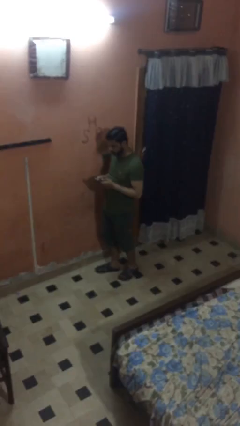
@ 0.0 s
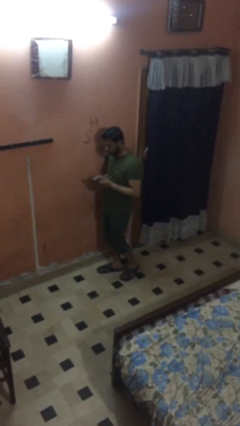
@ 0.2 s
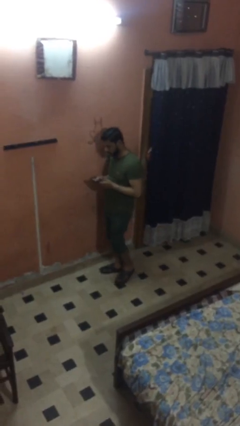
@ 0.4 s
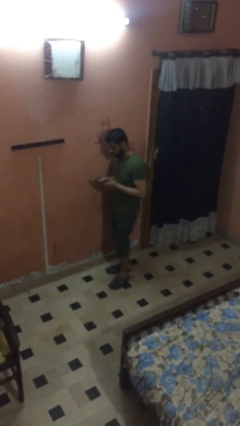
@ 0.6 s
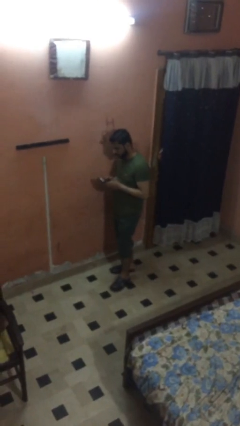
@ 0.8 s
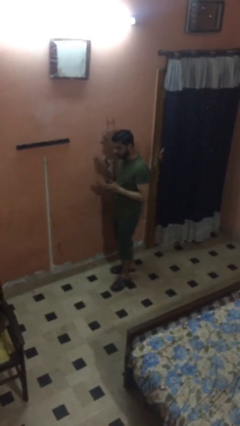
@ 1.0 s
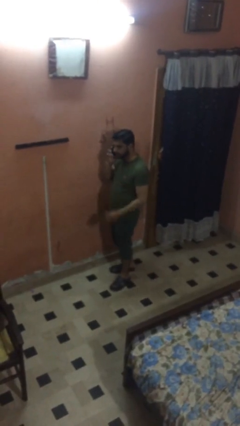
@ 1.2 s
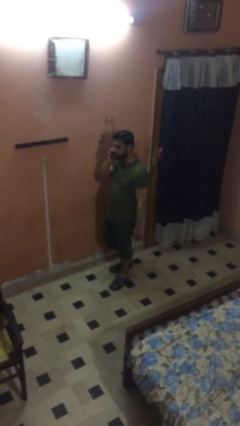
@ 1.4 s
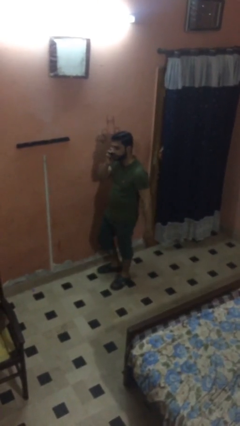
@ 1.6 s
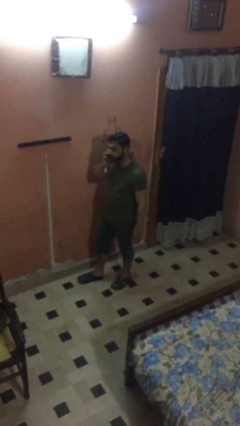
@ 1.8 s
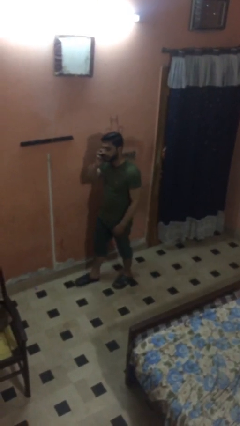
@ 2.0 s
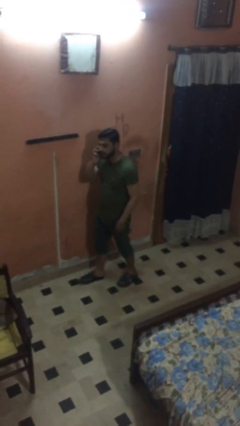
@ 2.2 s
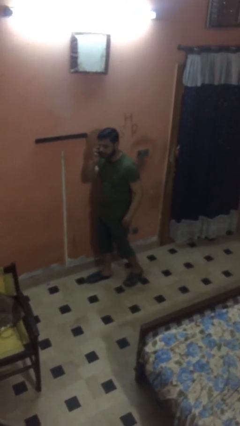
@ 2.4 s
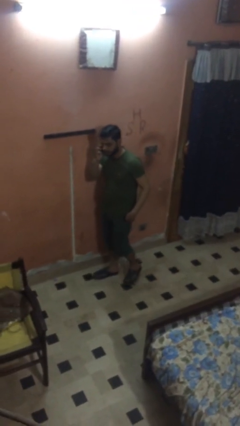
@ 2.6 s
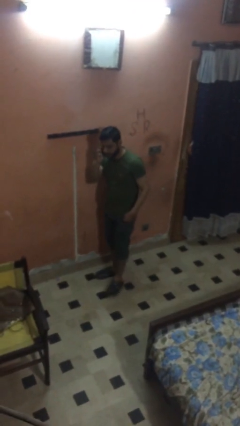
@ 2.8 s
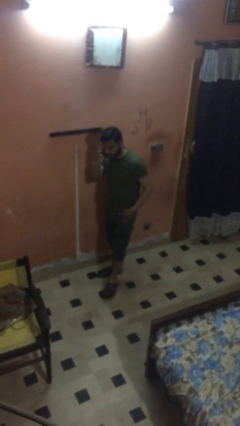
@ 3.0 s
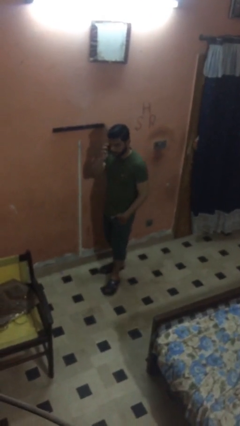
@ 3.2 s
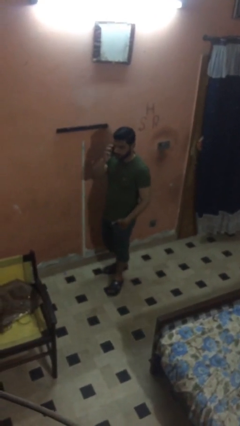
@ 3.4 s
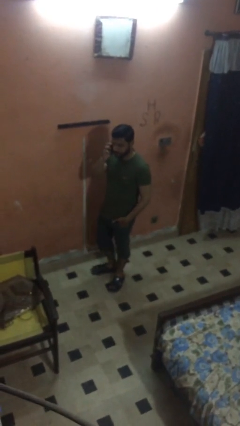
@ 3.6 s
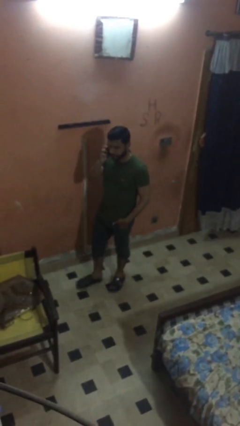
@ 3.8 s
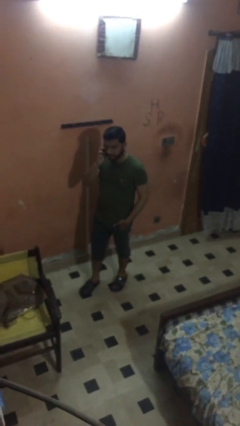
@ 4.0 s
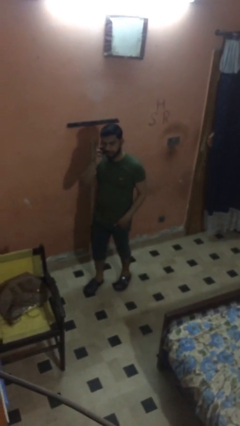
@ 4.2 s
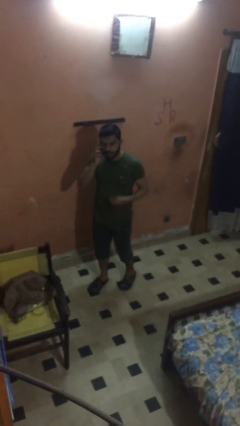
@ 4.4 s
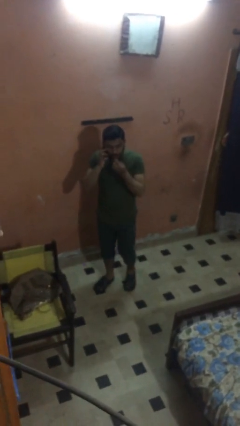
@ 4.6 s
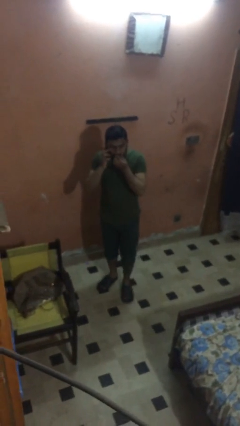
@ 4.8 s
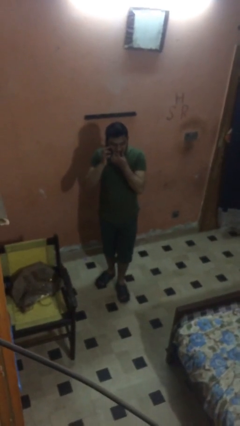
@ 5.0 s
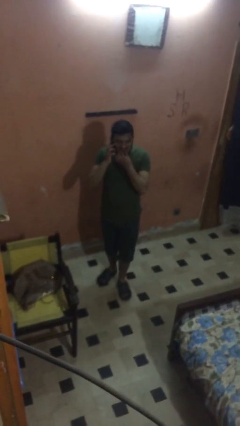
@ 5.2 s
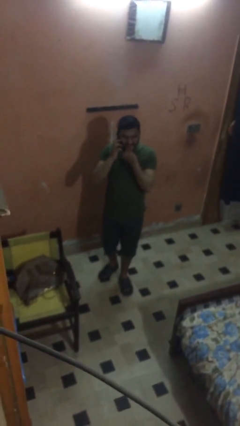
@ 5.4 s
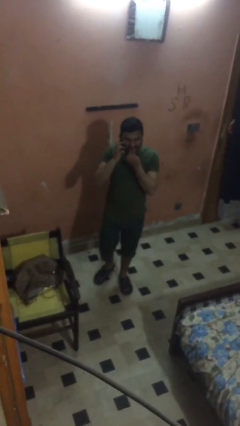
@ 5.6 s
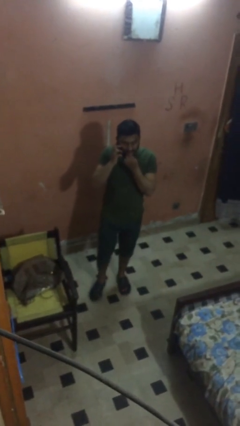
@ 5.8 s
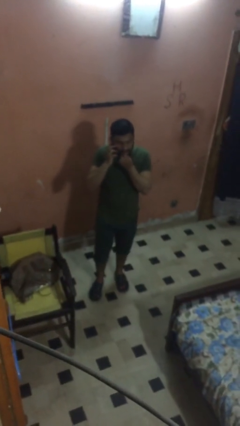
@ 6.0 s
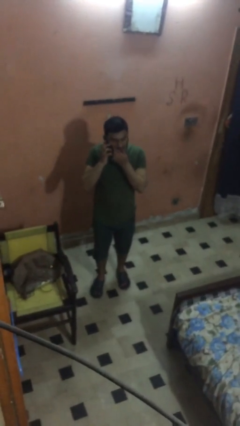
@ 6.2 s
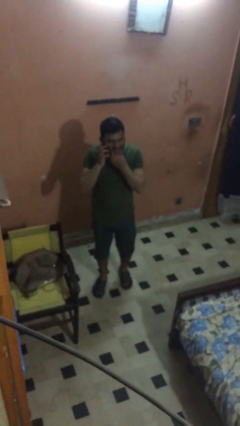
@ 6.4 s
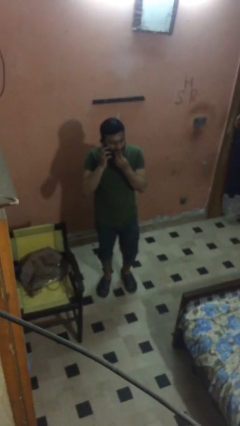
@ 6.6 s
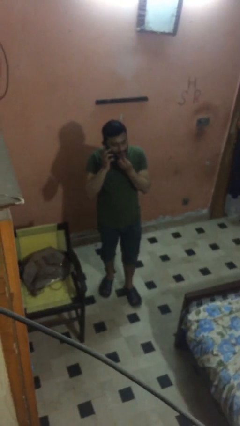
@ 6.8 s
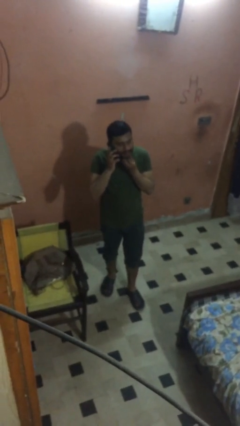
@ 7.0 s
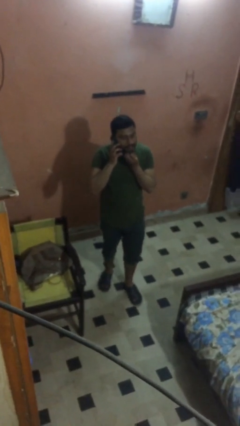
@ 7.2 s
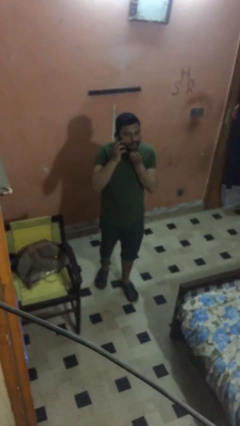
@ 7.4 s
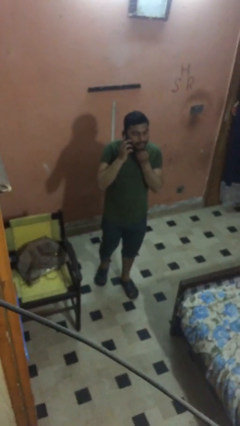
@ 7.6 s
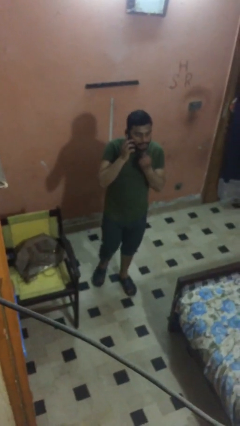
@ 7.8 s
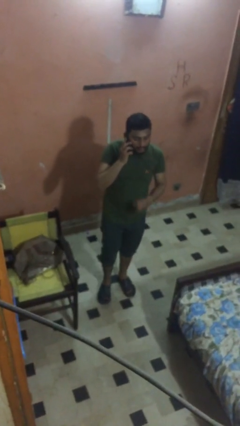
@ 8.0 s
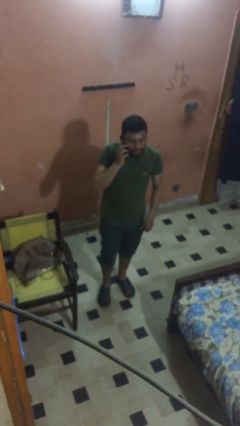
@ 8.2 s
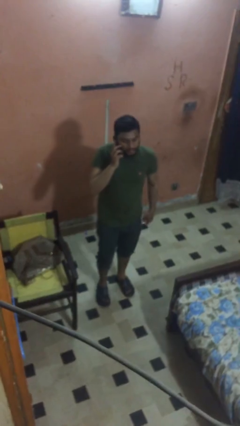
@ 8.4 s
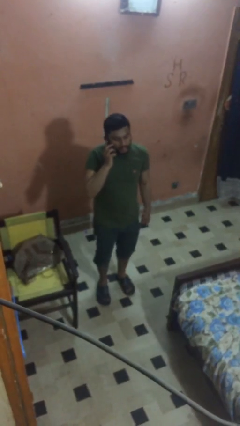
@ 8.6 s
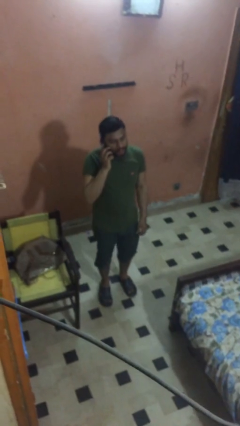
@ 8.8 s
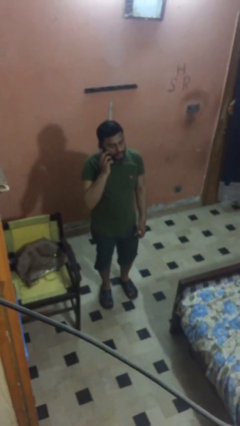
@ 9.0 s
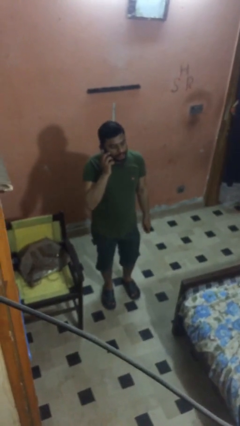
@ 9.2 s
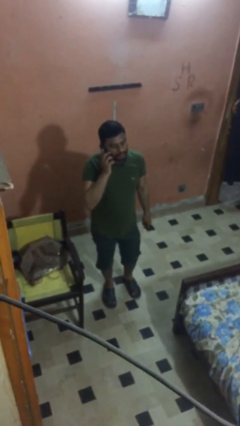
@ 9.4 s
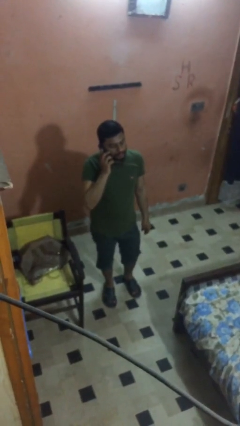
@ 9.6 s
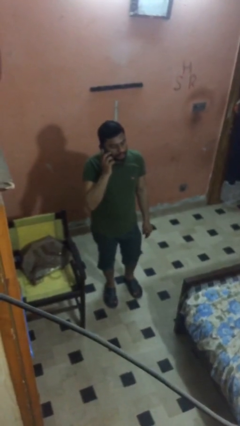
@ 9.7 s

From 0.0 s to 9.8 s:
person talks on phone

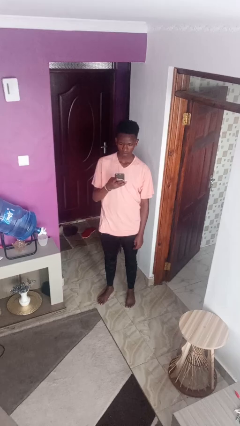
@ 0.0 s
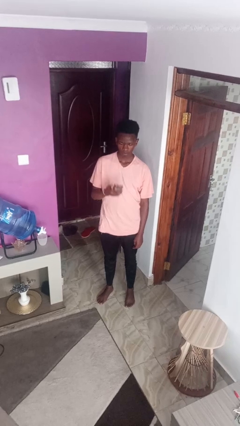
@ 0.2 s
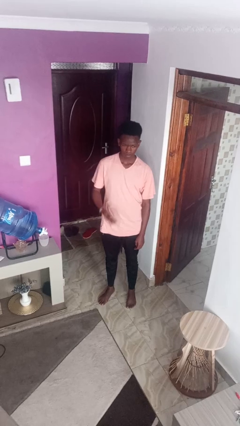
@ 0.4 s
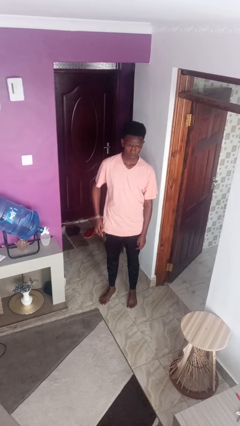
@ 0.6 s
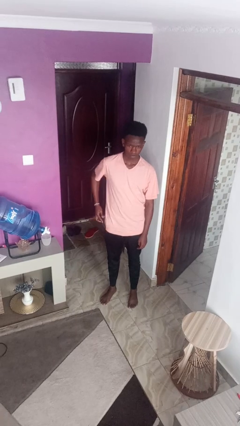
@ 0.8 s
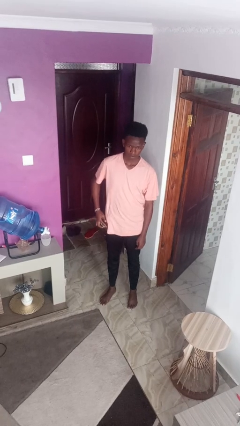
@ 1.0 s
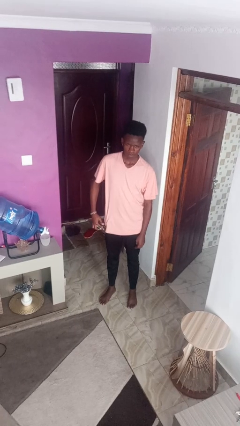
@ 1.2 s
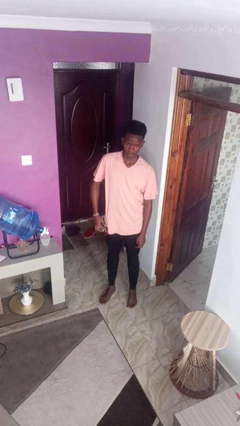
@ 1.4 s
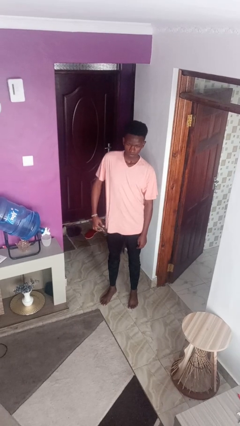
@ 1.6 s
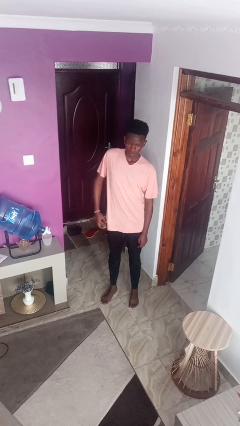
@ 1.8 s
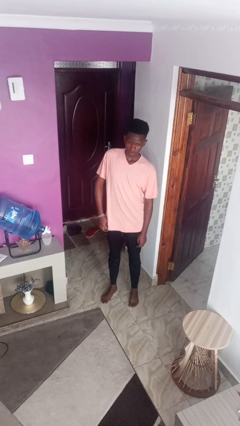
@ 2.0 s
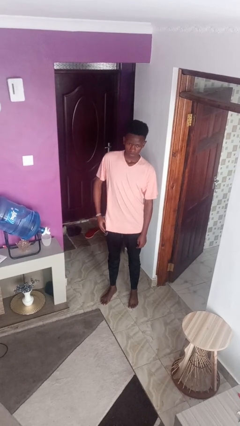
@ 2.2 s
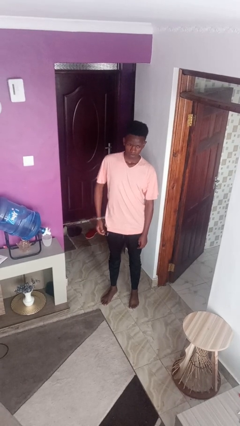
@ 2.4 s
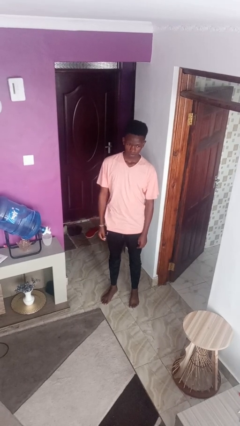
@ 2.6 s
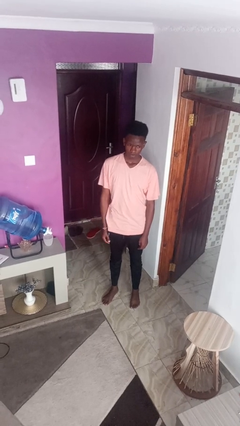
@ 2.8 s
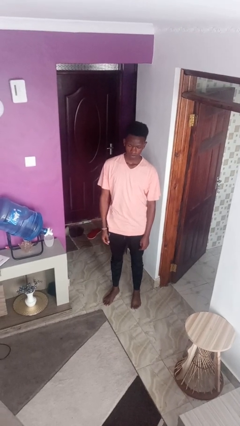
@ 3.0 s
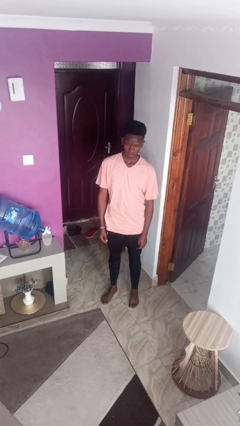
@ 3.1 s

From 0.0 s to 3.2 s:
person puts phone into pocket

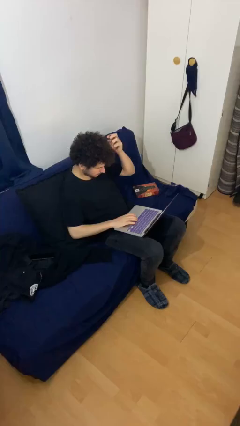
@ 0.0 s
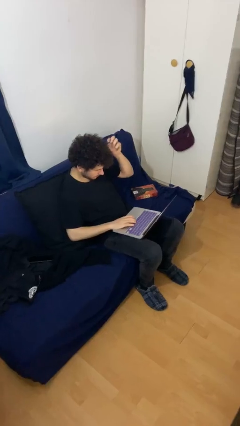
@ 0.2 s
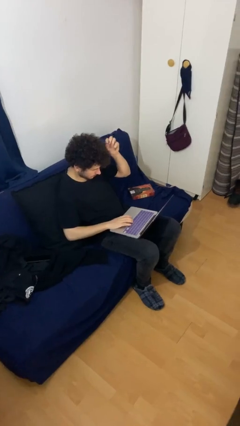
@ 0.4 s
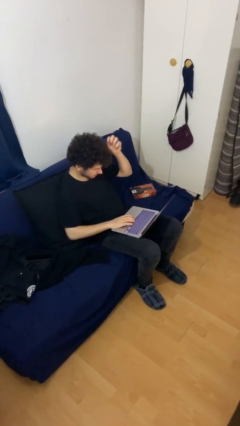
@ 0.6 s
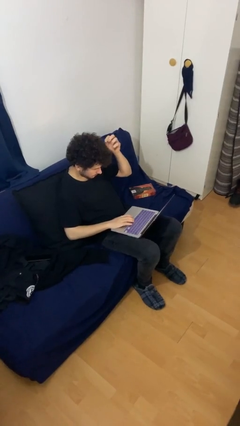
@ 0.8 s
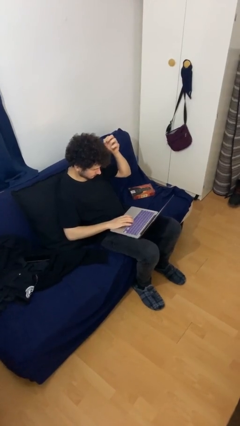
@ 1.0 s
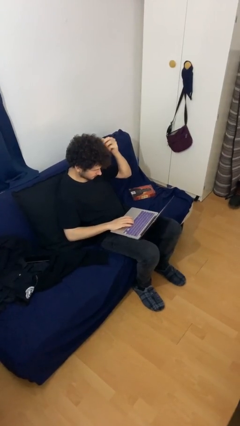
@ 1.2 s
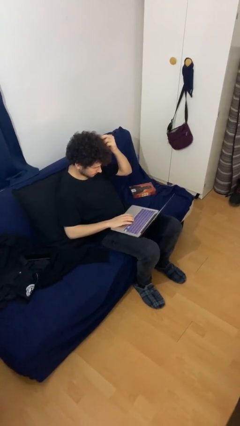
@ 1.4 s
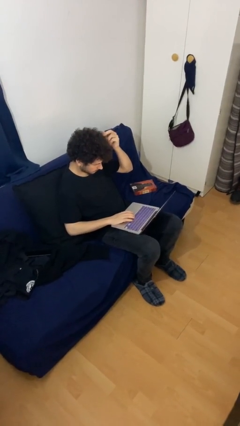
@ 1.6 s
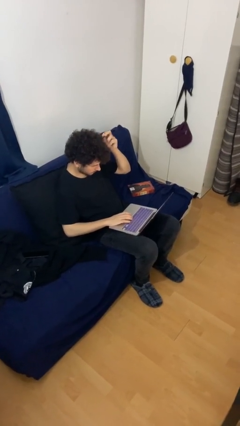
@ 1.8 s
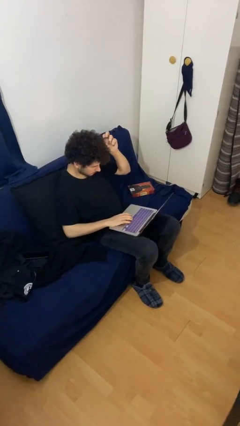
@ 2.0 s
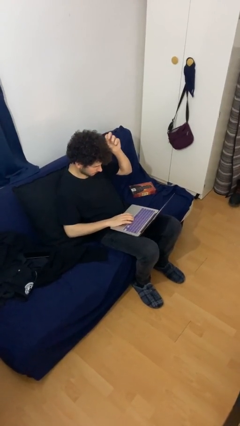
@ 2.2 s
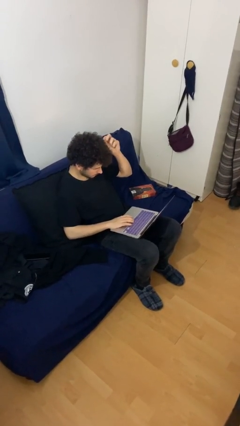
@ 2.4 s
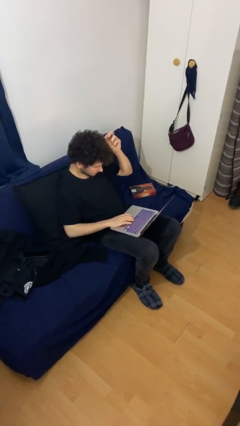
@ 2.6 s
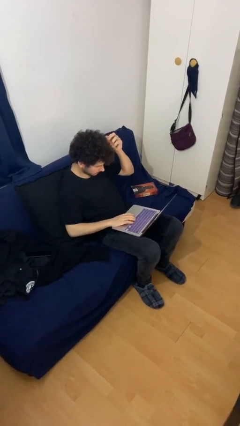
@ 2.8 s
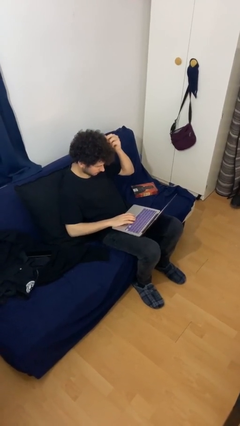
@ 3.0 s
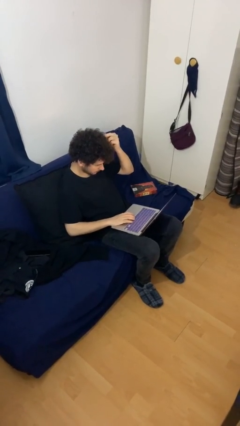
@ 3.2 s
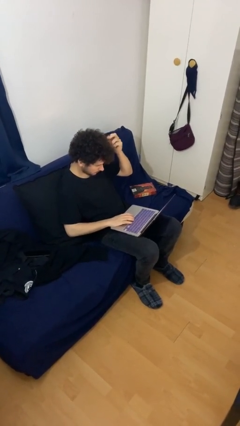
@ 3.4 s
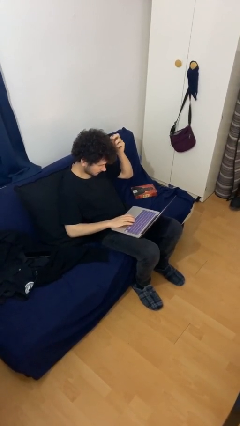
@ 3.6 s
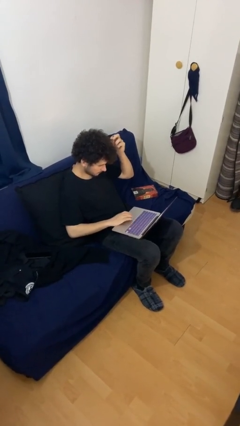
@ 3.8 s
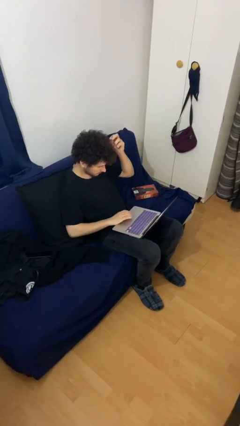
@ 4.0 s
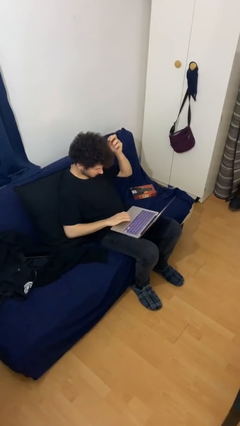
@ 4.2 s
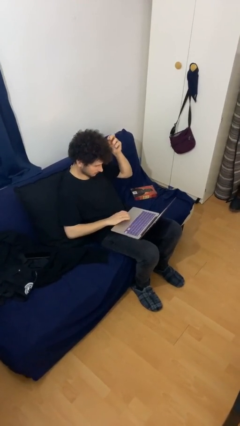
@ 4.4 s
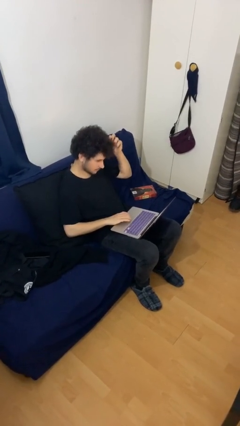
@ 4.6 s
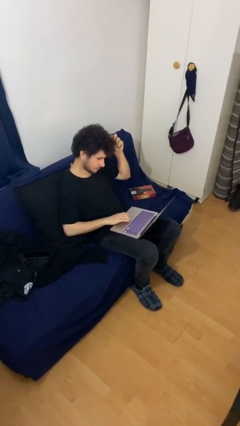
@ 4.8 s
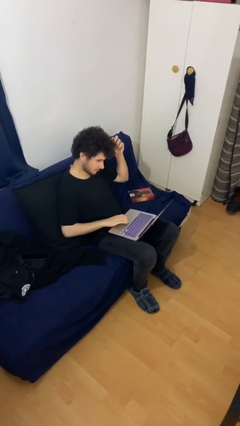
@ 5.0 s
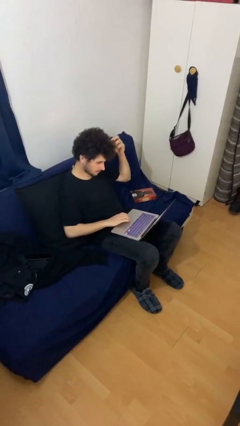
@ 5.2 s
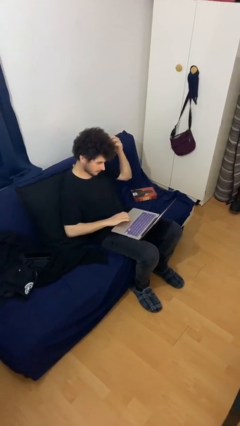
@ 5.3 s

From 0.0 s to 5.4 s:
person interacts with laptop
